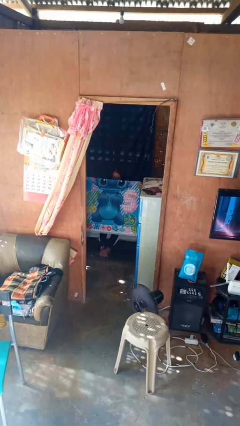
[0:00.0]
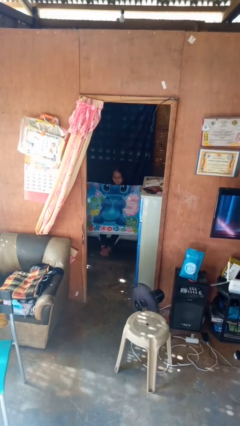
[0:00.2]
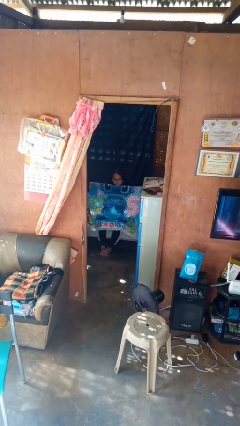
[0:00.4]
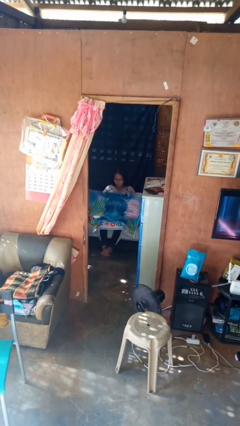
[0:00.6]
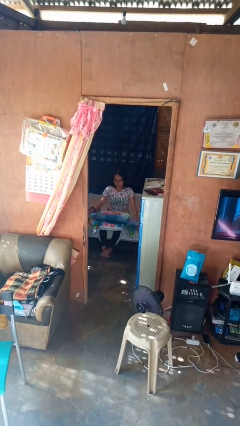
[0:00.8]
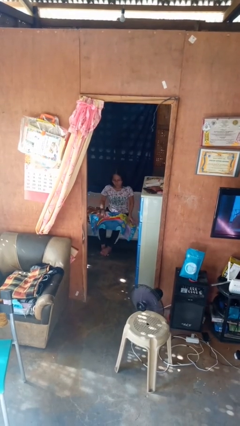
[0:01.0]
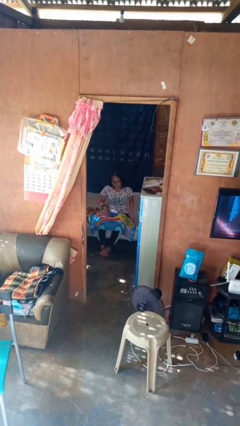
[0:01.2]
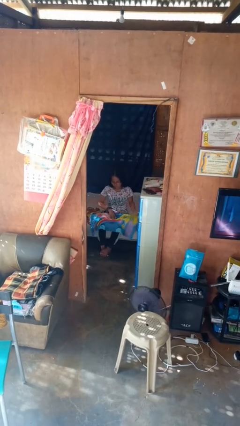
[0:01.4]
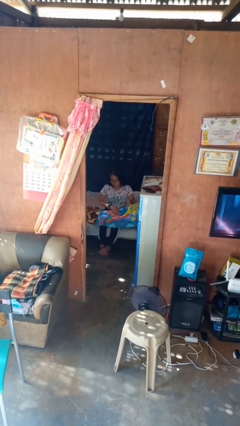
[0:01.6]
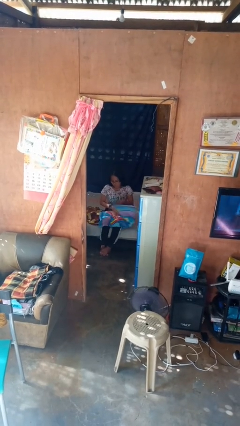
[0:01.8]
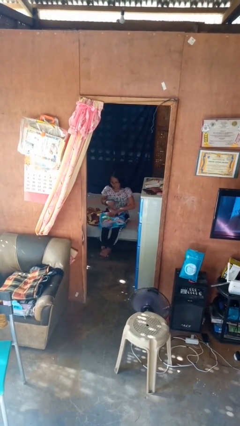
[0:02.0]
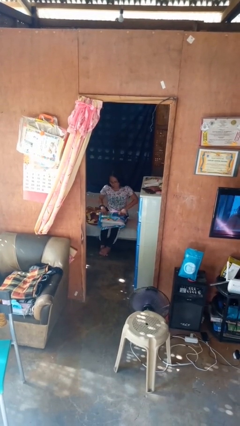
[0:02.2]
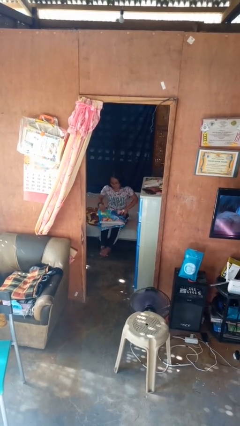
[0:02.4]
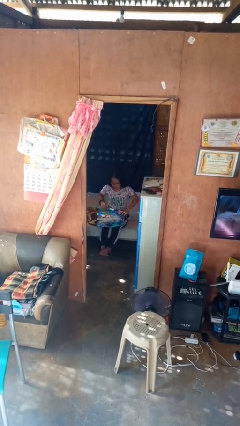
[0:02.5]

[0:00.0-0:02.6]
person folds blanket

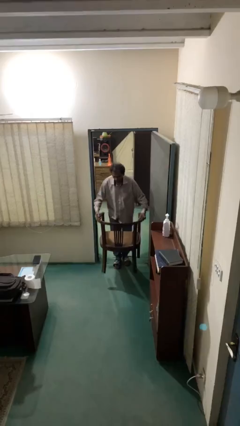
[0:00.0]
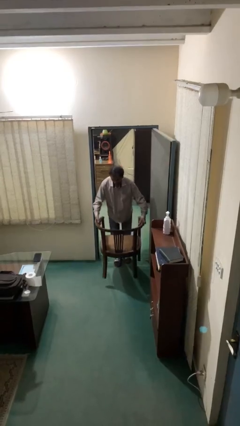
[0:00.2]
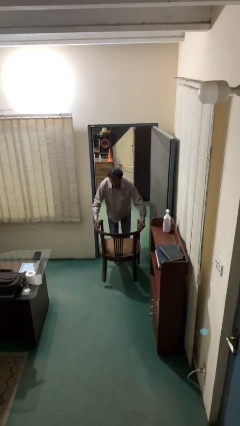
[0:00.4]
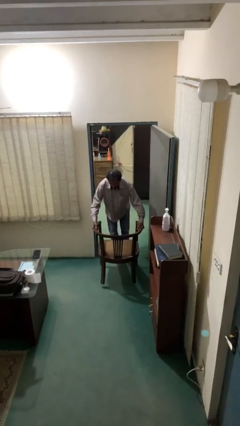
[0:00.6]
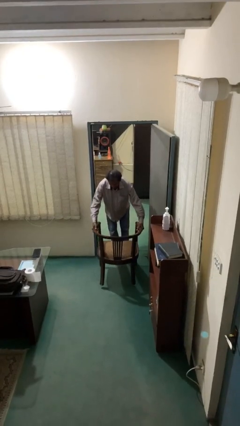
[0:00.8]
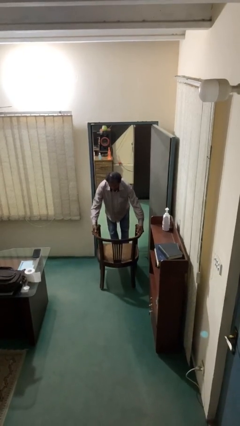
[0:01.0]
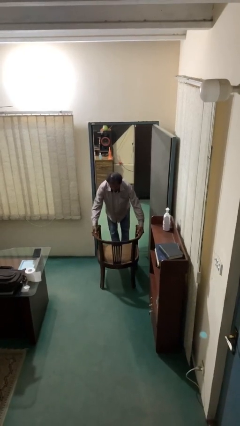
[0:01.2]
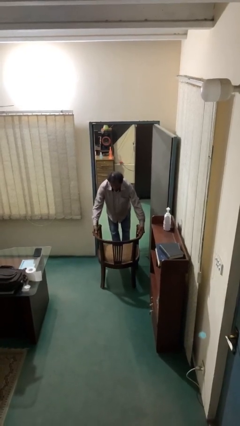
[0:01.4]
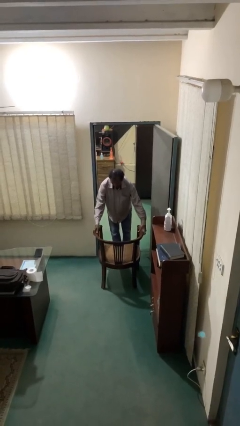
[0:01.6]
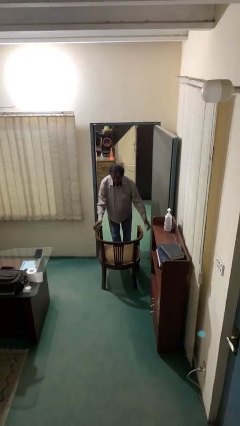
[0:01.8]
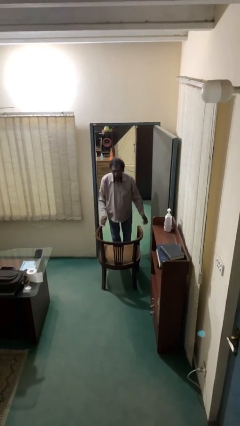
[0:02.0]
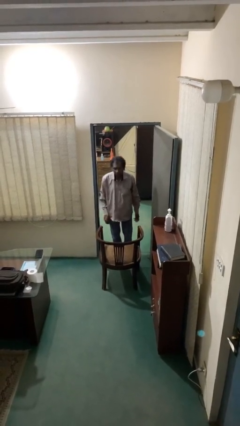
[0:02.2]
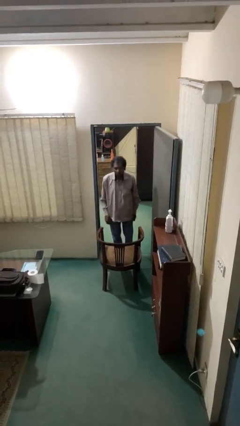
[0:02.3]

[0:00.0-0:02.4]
person puts down object on floor

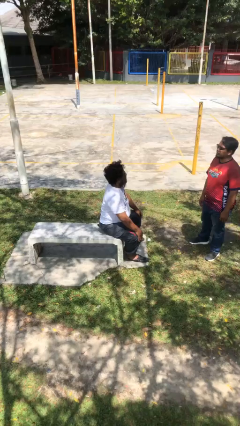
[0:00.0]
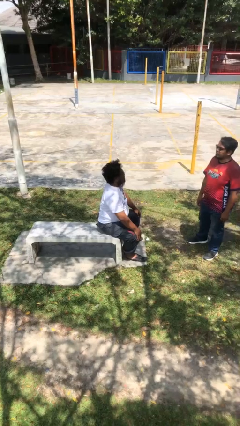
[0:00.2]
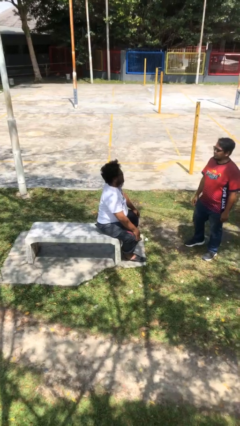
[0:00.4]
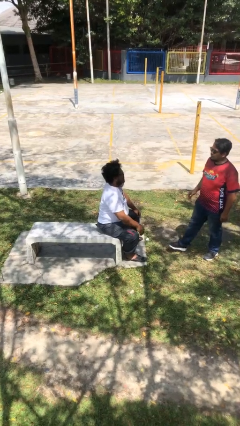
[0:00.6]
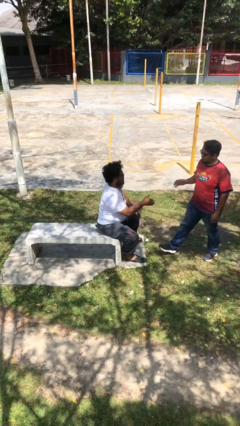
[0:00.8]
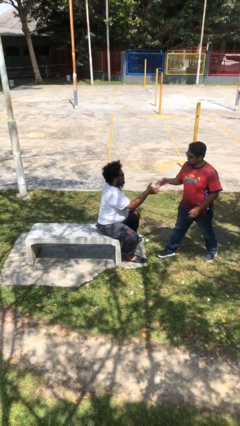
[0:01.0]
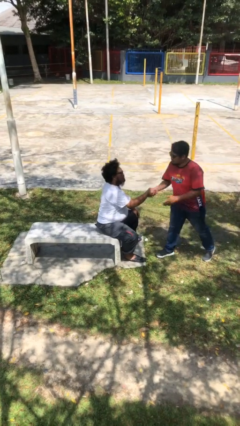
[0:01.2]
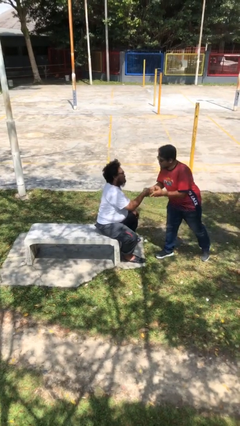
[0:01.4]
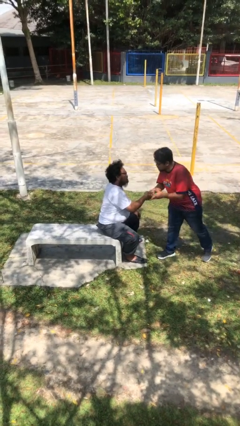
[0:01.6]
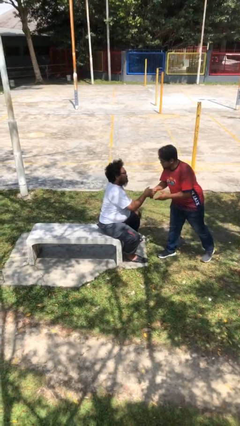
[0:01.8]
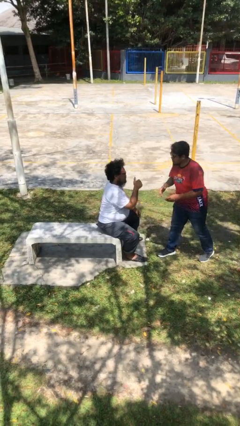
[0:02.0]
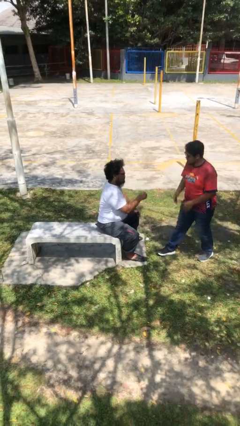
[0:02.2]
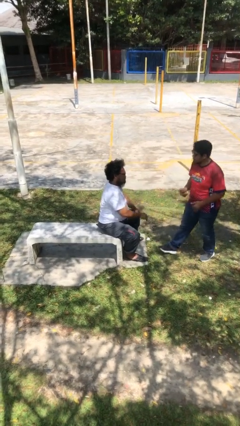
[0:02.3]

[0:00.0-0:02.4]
person shakes hand

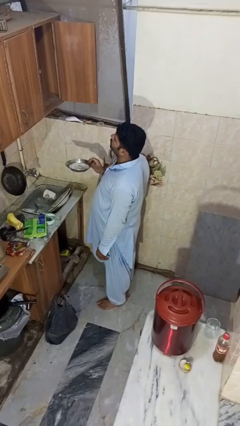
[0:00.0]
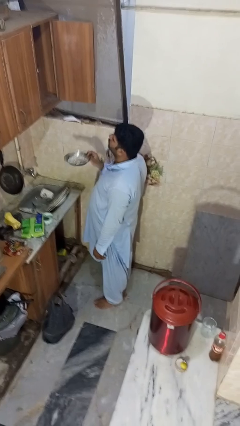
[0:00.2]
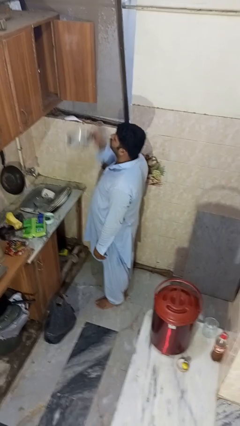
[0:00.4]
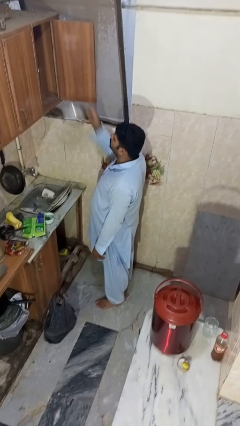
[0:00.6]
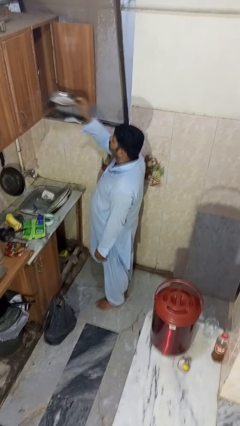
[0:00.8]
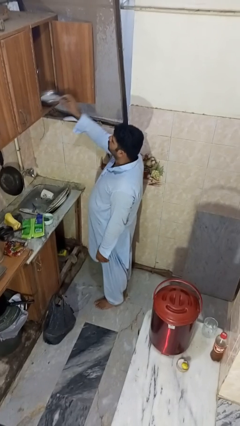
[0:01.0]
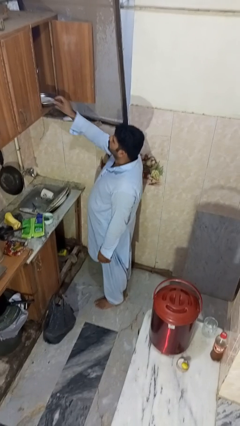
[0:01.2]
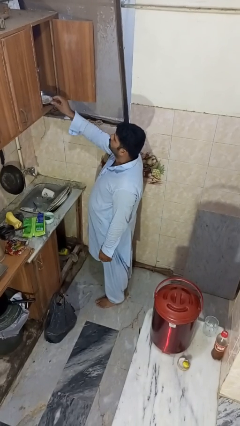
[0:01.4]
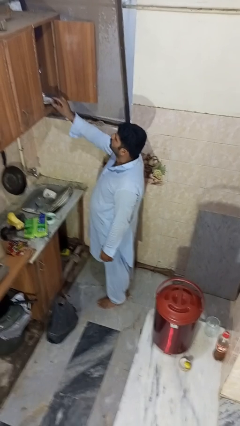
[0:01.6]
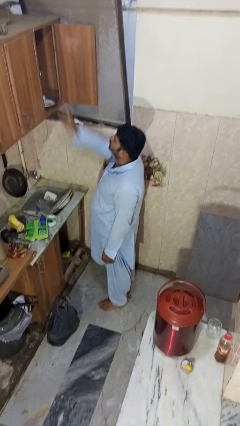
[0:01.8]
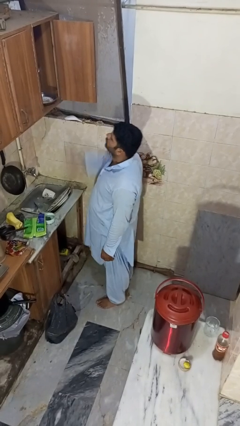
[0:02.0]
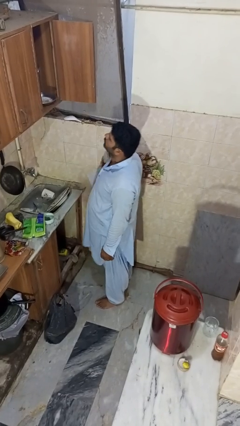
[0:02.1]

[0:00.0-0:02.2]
person puts object in cabinet

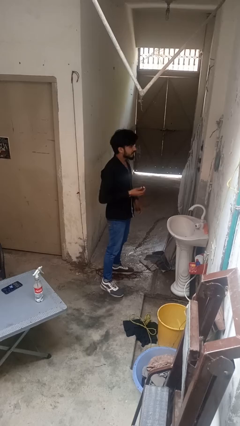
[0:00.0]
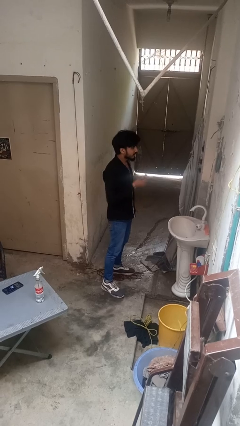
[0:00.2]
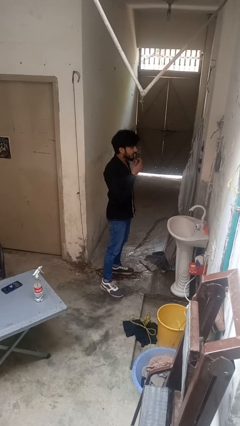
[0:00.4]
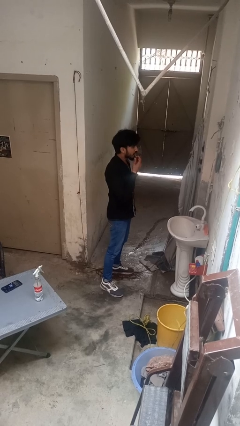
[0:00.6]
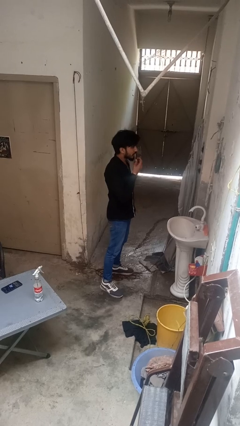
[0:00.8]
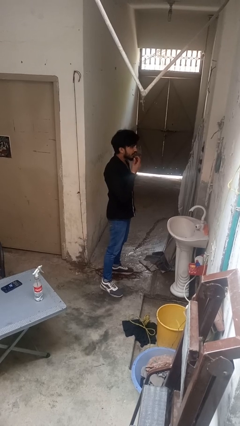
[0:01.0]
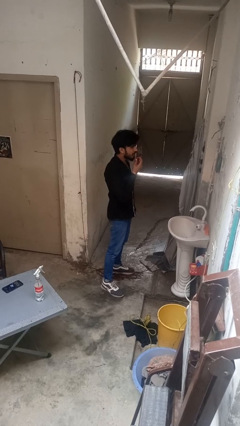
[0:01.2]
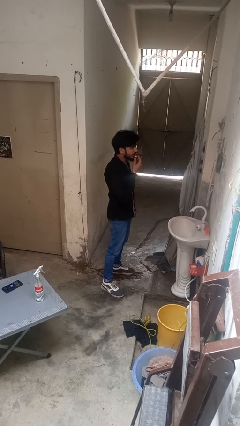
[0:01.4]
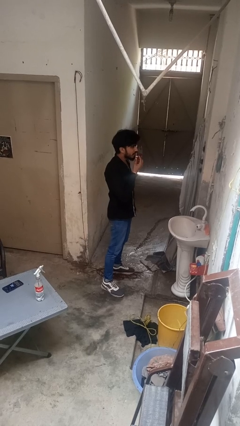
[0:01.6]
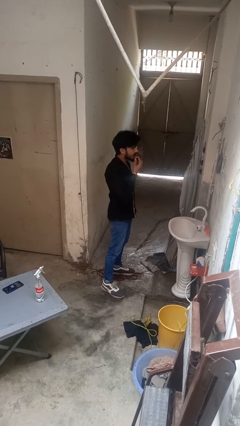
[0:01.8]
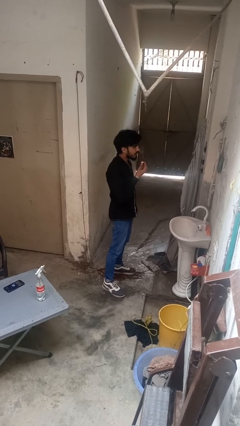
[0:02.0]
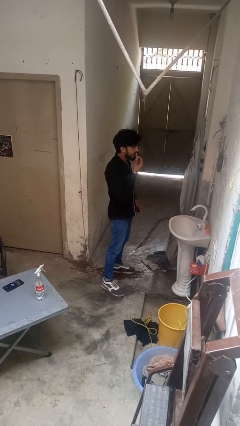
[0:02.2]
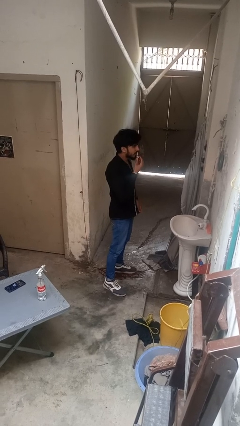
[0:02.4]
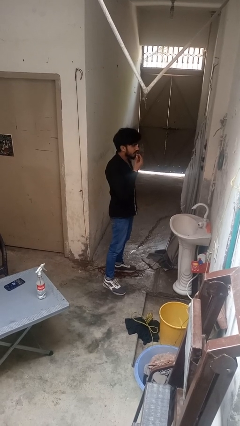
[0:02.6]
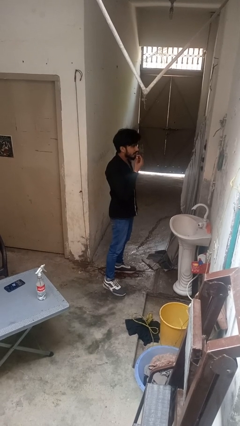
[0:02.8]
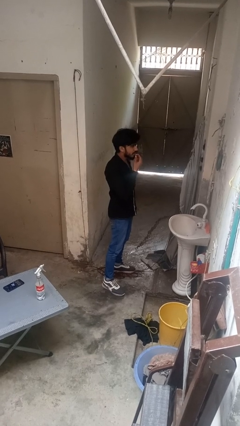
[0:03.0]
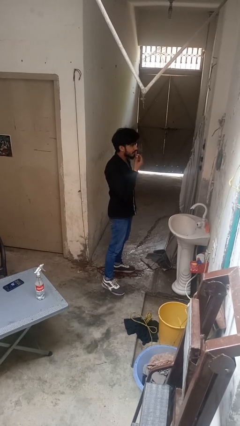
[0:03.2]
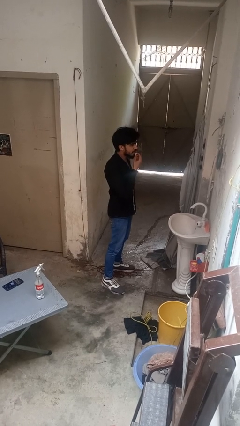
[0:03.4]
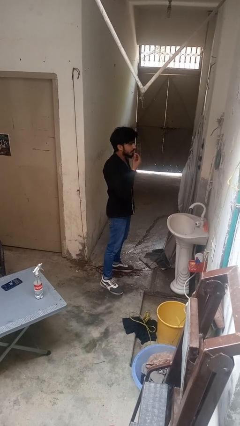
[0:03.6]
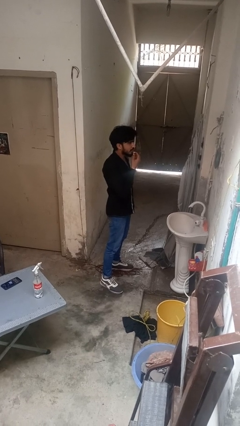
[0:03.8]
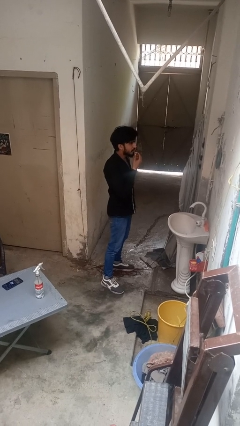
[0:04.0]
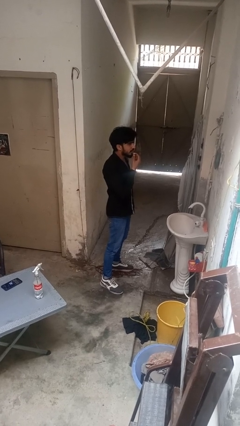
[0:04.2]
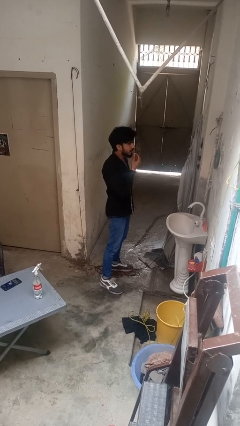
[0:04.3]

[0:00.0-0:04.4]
person applies lip makeup

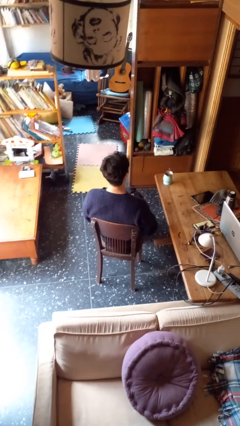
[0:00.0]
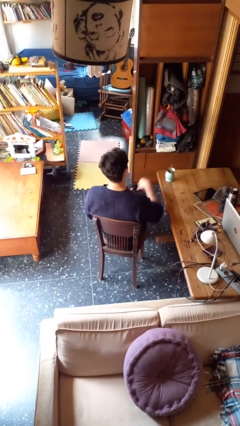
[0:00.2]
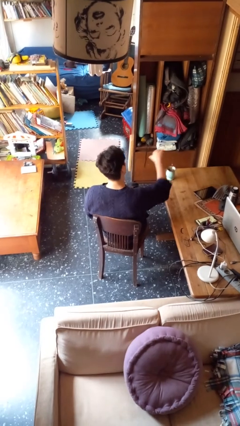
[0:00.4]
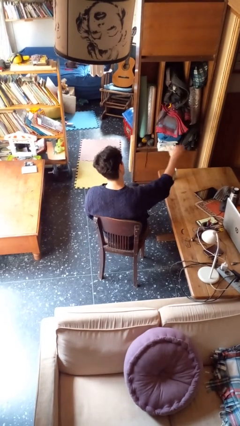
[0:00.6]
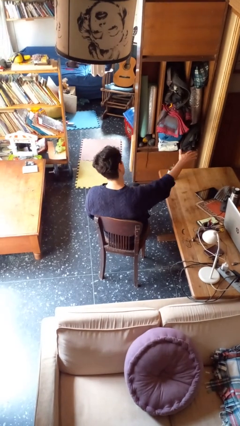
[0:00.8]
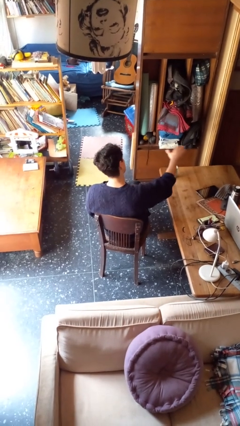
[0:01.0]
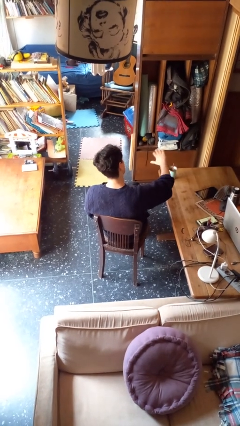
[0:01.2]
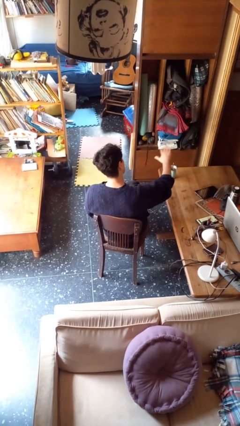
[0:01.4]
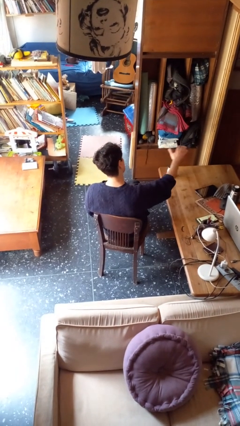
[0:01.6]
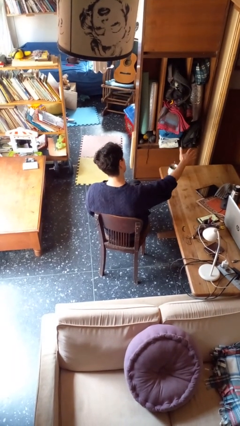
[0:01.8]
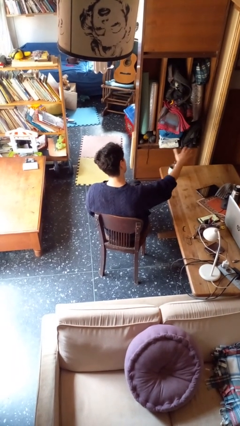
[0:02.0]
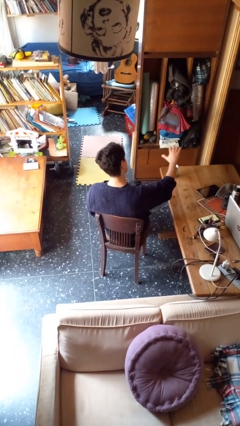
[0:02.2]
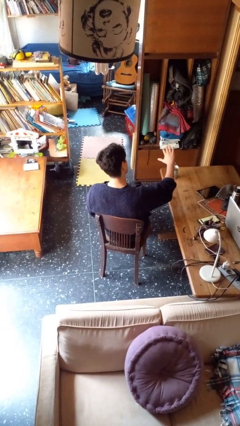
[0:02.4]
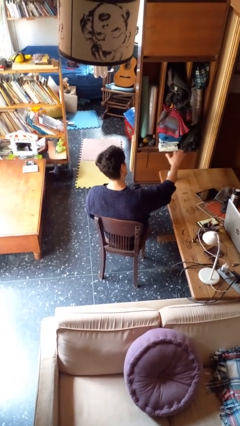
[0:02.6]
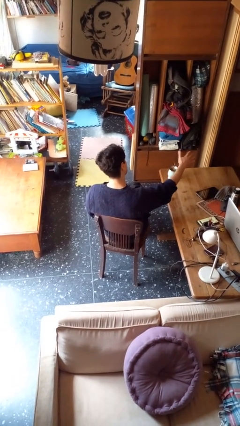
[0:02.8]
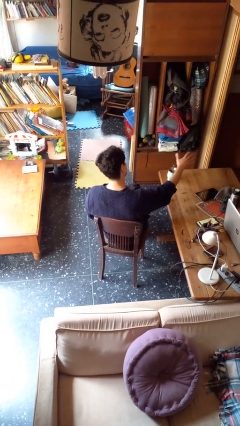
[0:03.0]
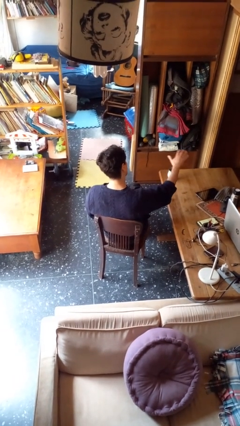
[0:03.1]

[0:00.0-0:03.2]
person waves hand over object

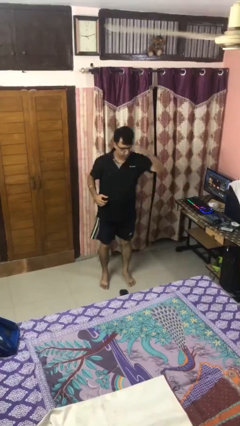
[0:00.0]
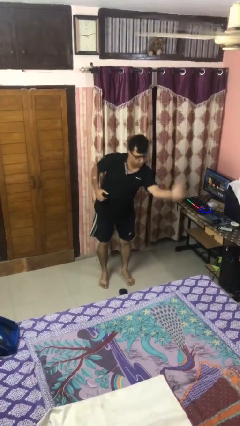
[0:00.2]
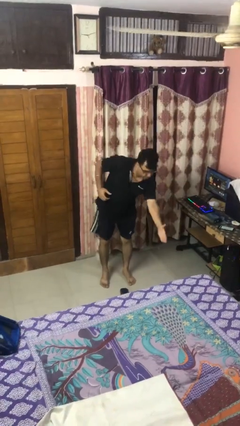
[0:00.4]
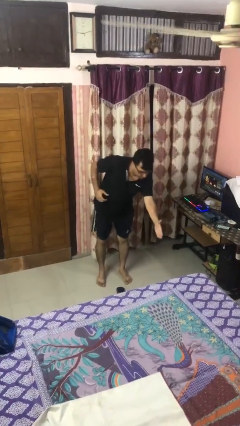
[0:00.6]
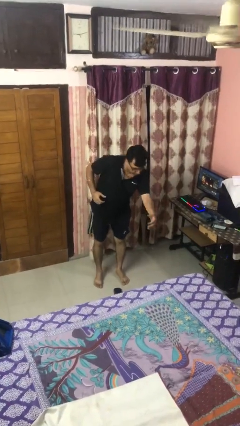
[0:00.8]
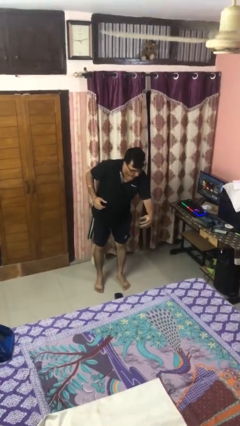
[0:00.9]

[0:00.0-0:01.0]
person karate chop
